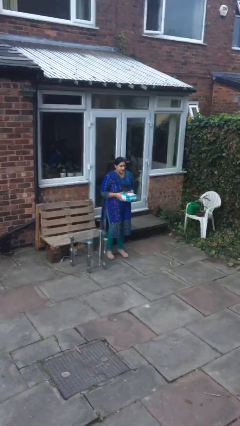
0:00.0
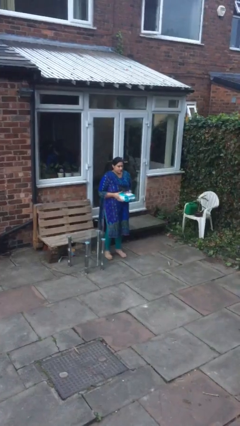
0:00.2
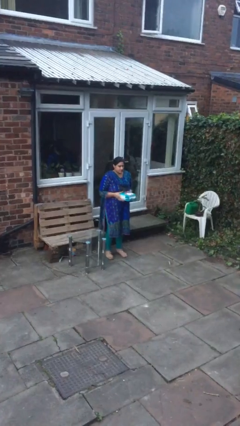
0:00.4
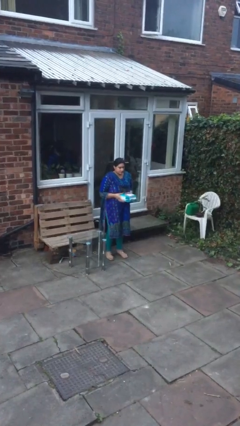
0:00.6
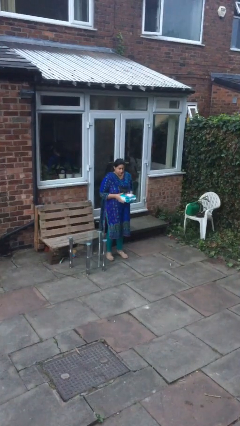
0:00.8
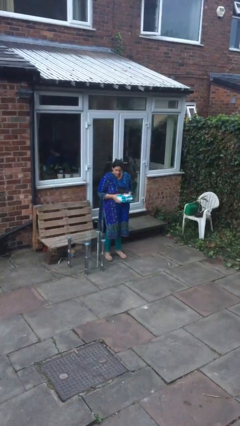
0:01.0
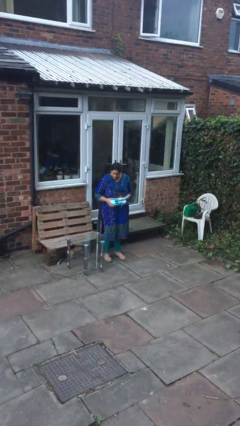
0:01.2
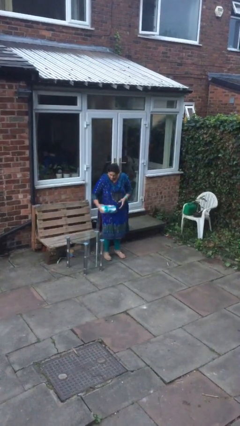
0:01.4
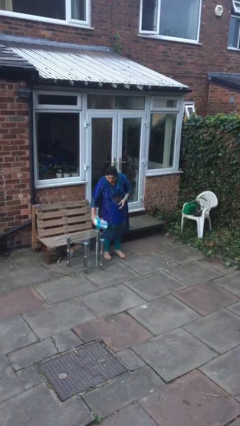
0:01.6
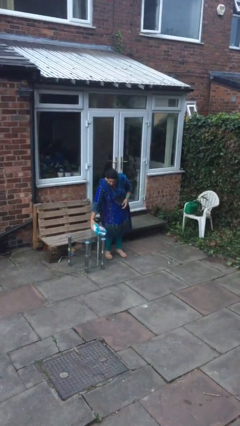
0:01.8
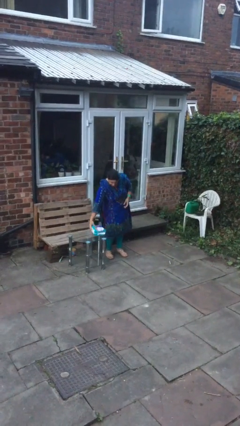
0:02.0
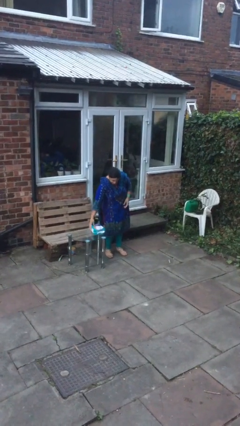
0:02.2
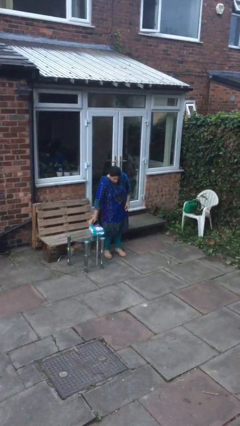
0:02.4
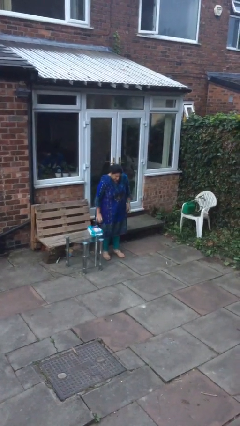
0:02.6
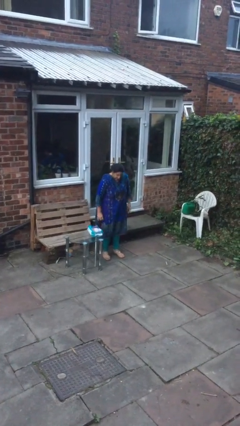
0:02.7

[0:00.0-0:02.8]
person puts down object on table

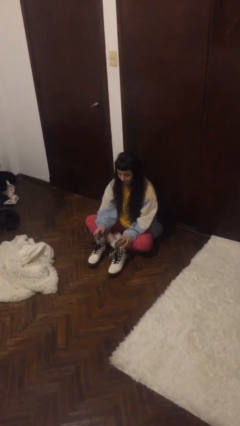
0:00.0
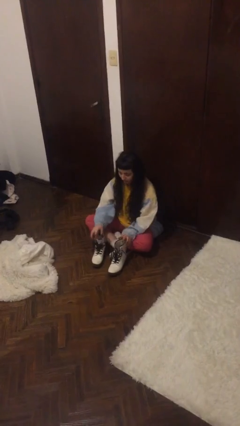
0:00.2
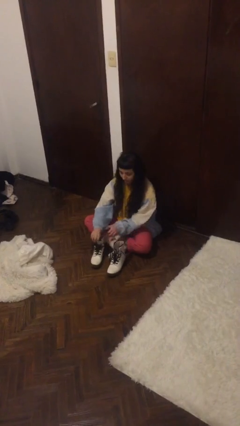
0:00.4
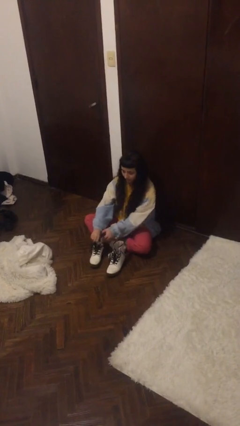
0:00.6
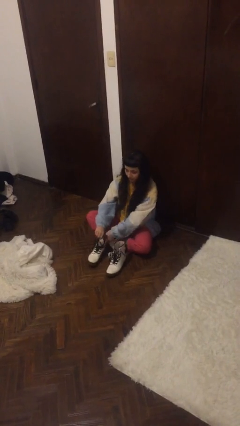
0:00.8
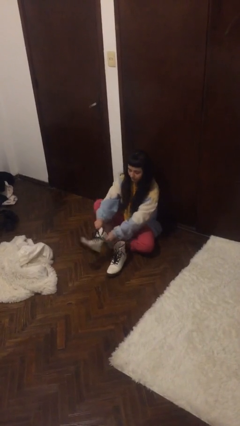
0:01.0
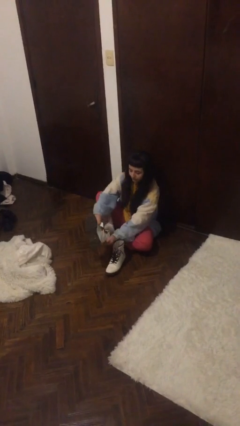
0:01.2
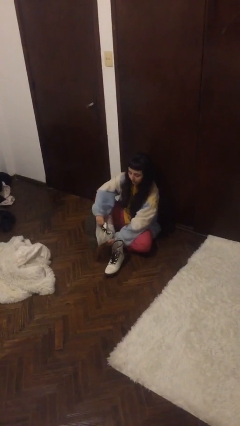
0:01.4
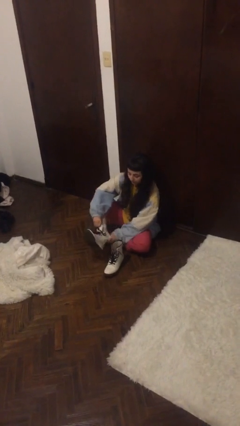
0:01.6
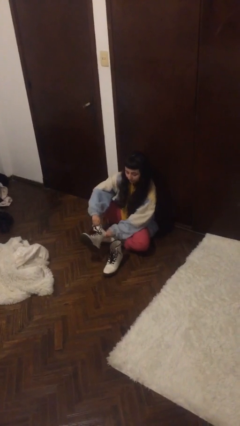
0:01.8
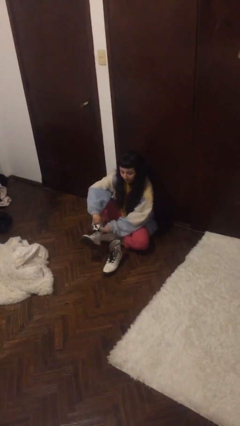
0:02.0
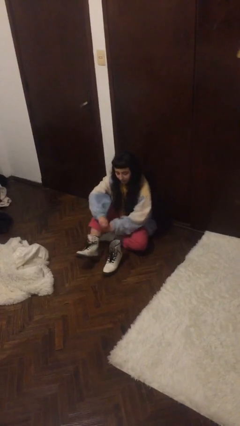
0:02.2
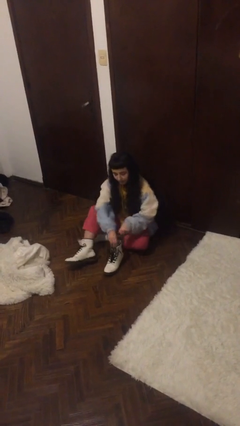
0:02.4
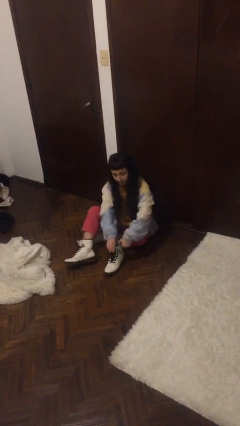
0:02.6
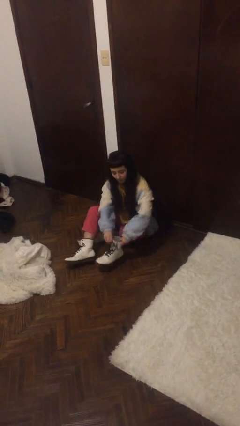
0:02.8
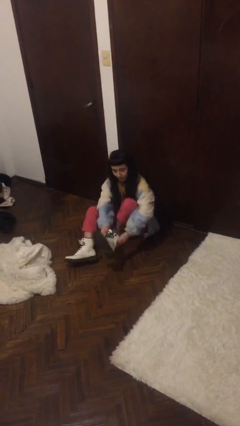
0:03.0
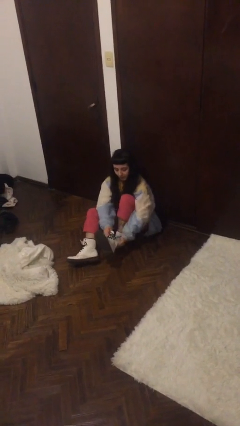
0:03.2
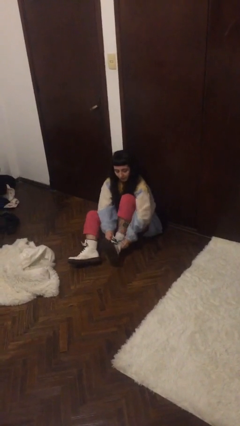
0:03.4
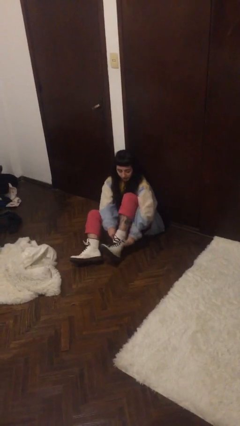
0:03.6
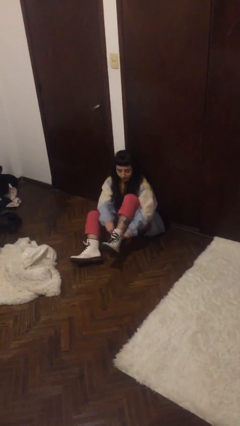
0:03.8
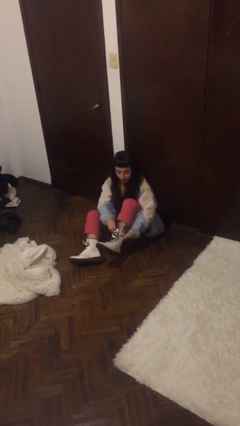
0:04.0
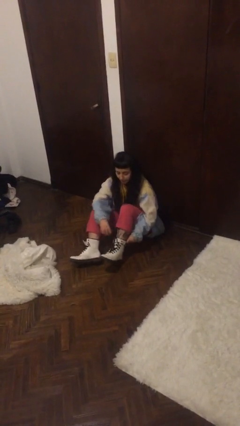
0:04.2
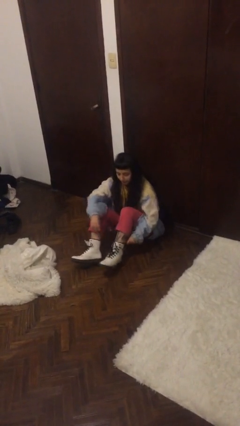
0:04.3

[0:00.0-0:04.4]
person puts on boots

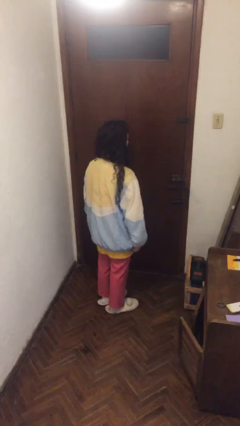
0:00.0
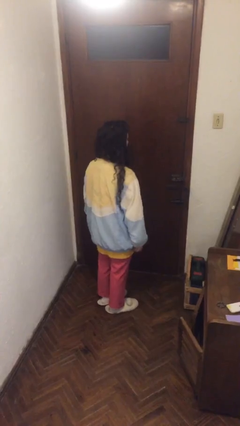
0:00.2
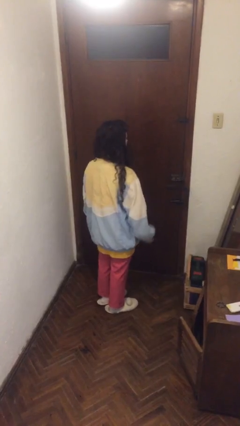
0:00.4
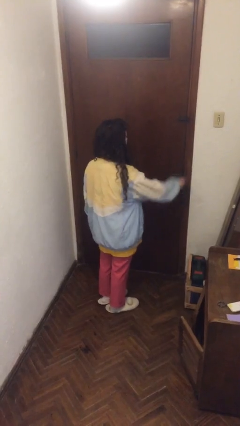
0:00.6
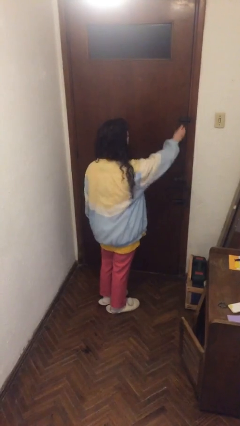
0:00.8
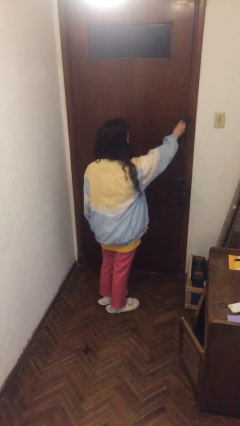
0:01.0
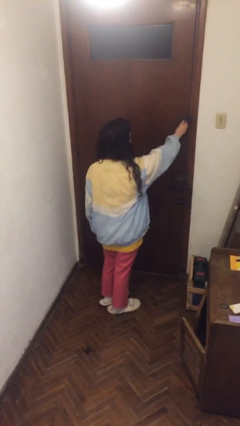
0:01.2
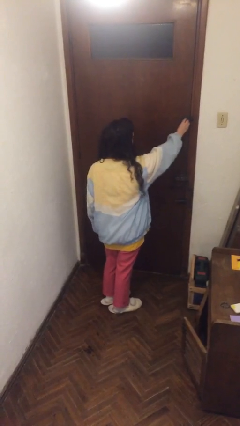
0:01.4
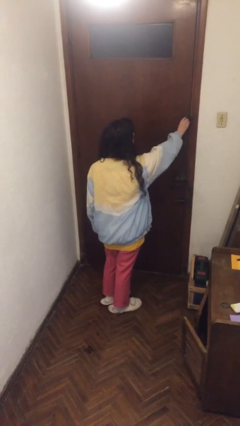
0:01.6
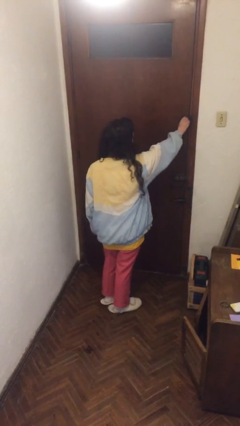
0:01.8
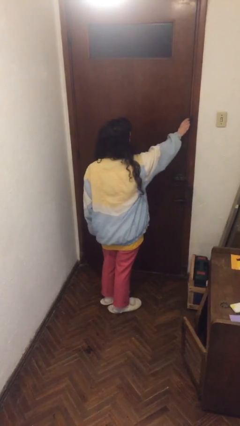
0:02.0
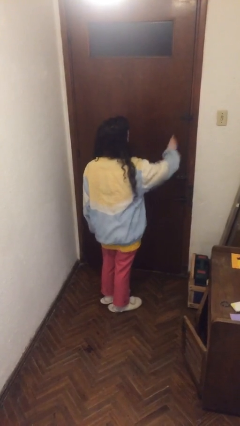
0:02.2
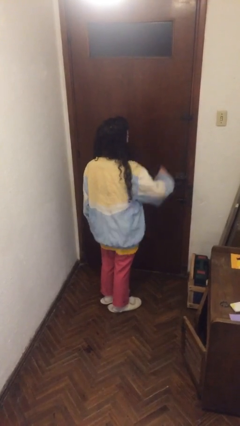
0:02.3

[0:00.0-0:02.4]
person locks door with keys

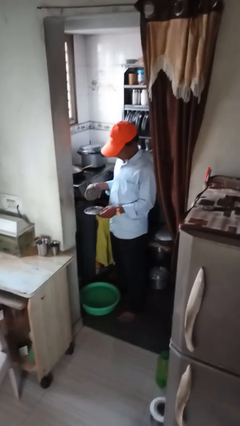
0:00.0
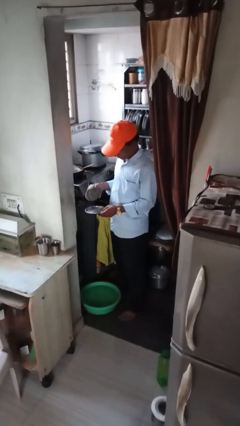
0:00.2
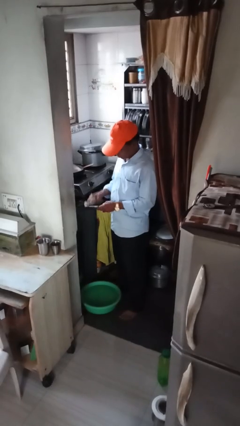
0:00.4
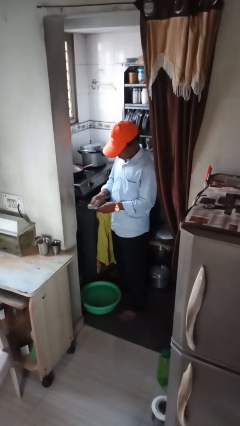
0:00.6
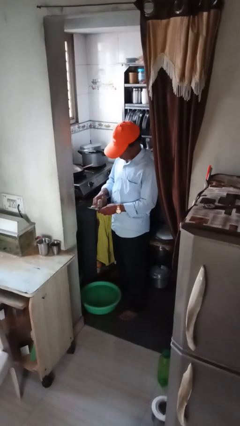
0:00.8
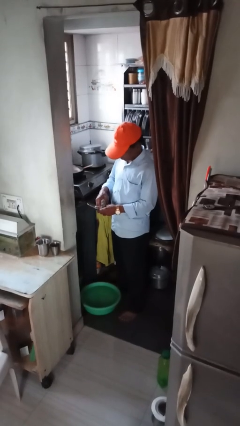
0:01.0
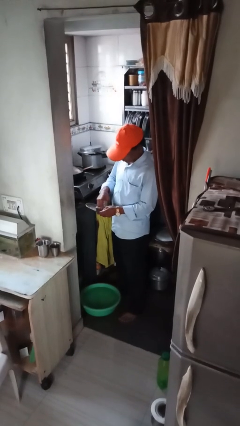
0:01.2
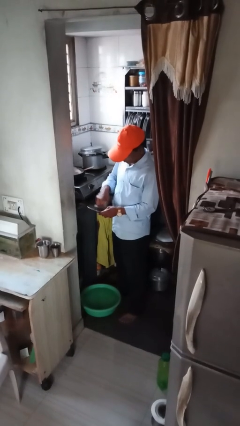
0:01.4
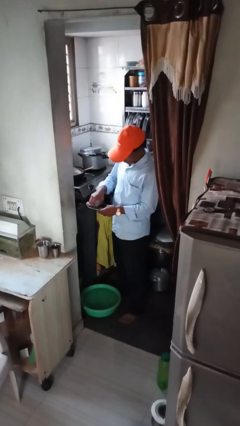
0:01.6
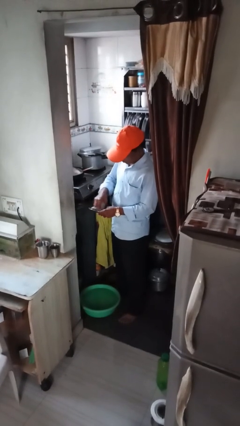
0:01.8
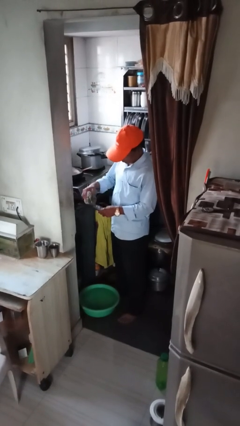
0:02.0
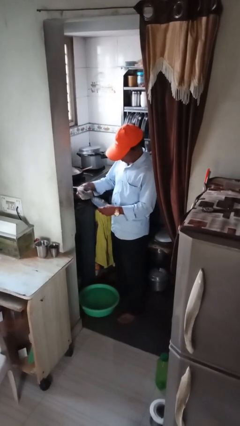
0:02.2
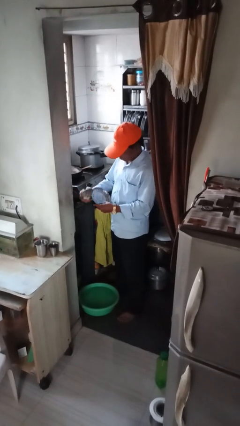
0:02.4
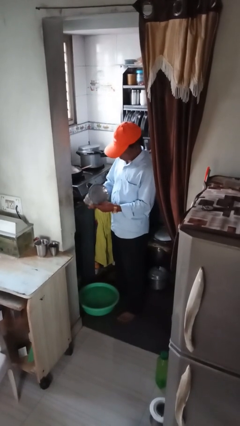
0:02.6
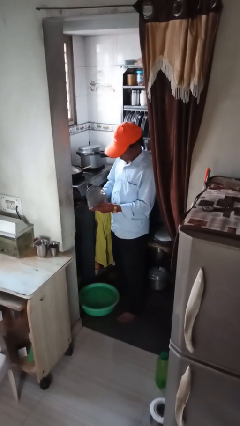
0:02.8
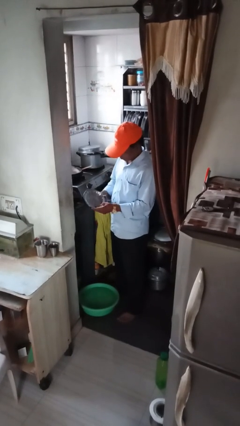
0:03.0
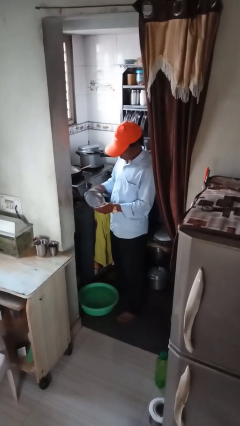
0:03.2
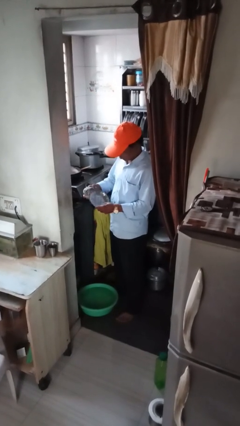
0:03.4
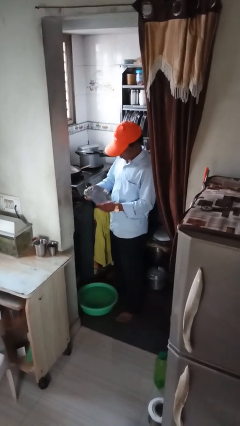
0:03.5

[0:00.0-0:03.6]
person dries dish

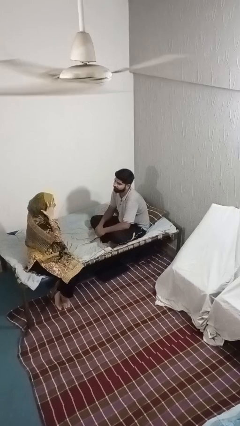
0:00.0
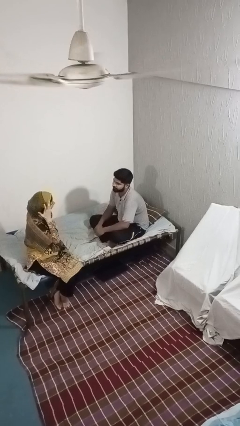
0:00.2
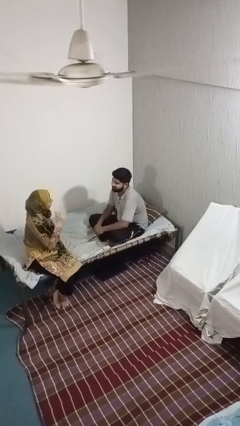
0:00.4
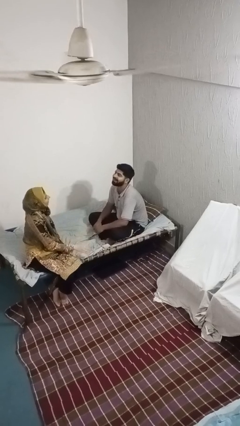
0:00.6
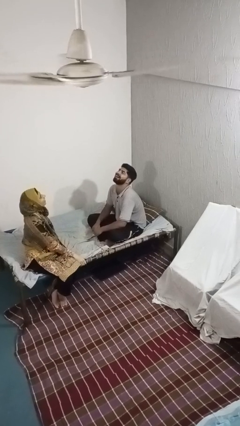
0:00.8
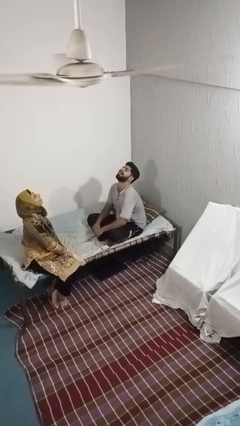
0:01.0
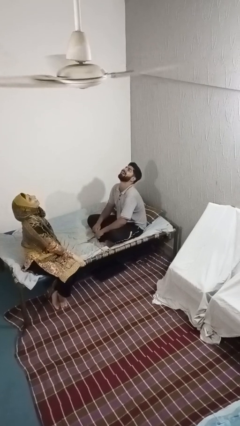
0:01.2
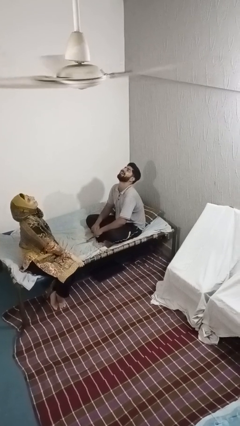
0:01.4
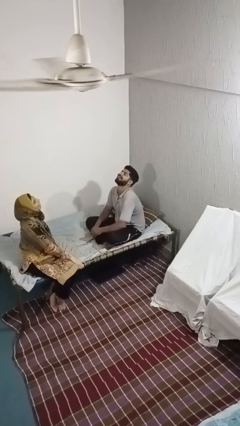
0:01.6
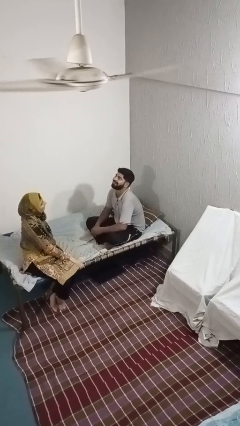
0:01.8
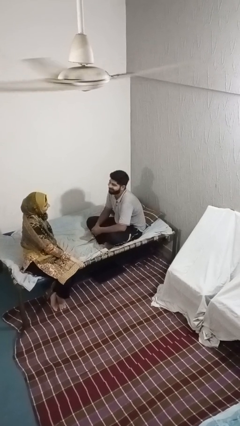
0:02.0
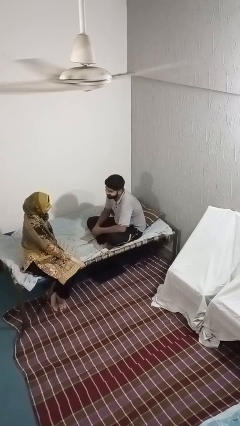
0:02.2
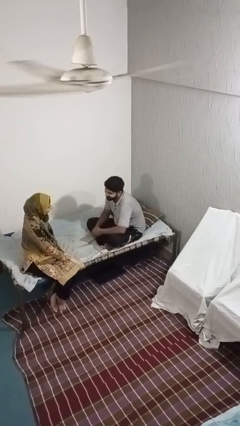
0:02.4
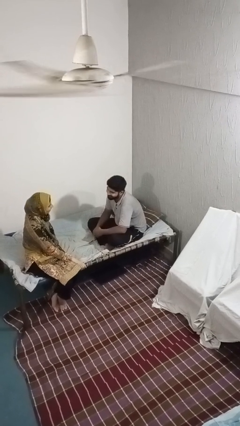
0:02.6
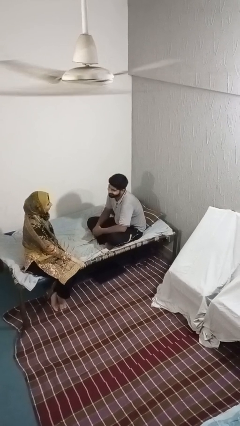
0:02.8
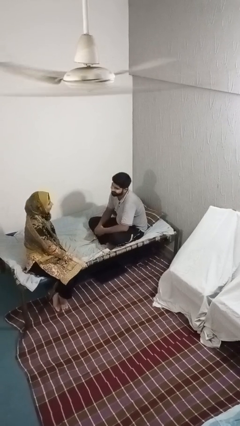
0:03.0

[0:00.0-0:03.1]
person laughs with person

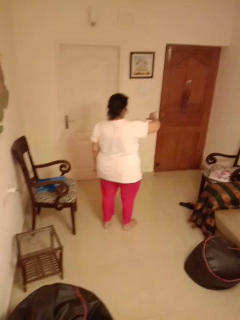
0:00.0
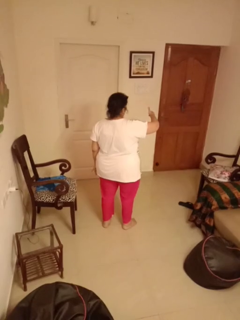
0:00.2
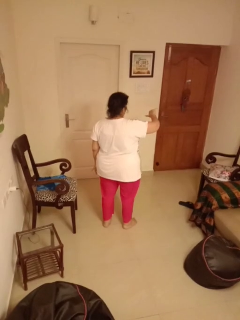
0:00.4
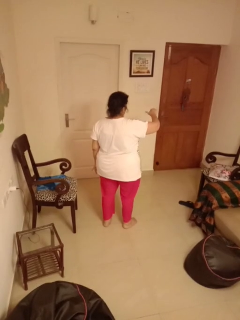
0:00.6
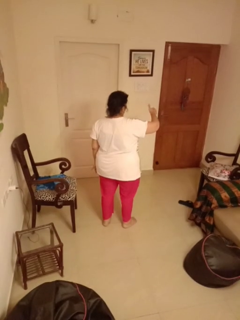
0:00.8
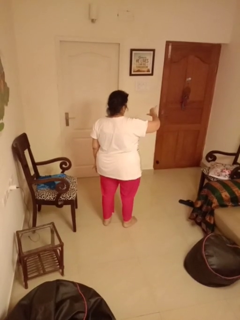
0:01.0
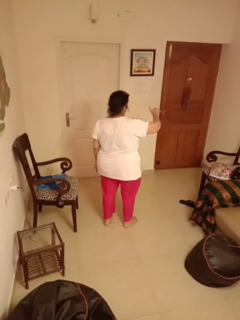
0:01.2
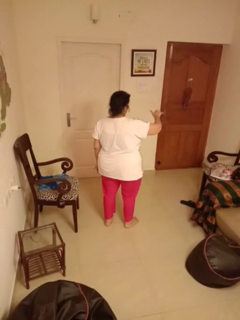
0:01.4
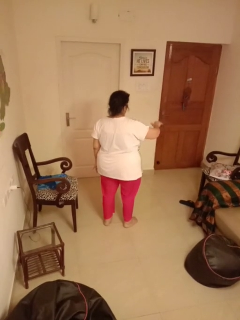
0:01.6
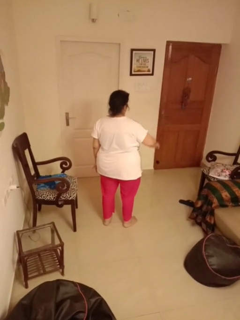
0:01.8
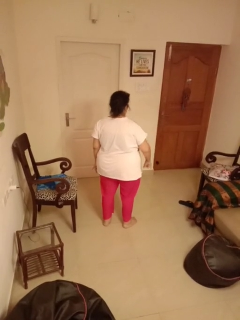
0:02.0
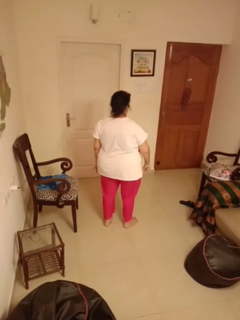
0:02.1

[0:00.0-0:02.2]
person gestures hang loose
